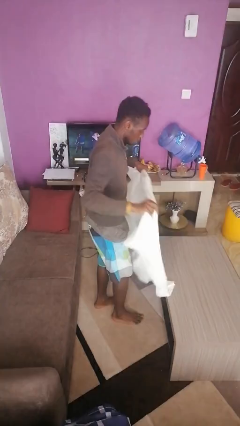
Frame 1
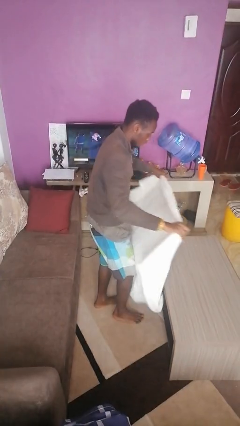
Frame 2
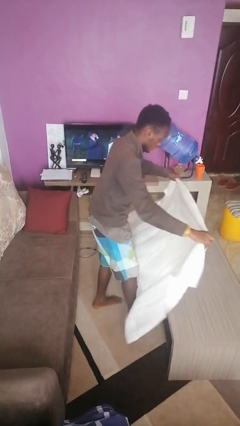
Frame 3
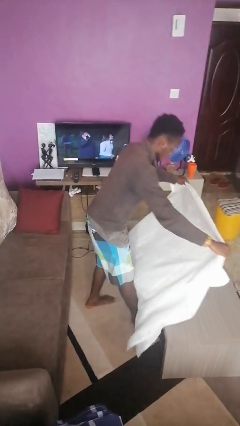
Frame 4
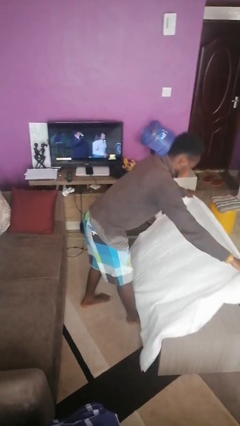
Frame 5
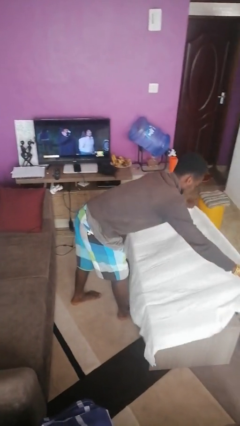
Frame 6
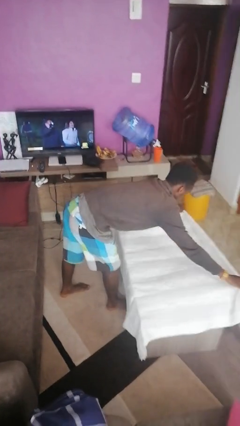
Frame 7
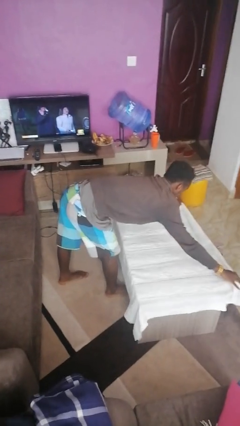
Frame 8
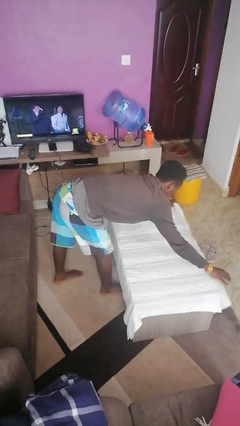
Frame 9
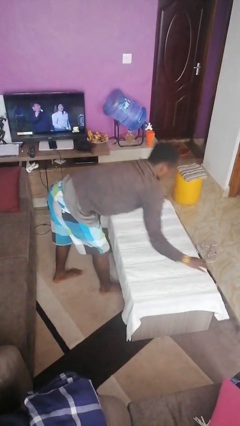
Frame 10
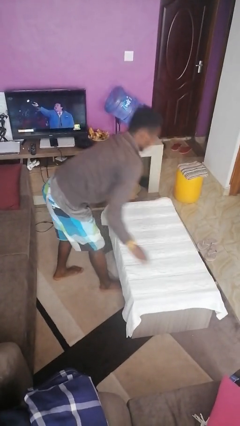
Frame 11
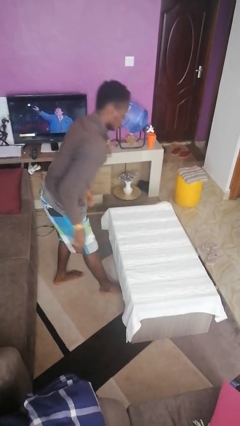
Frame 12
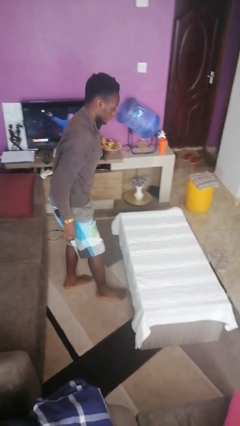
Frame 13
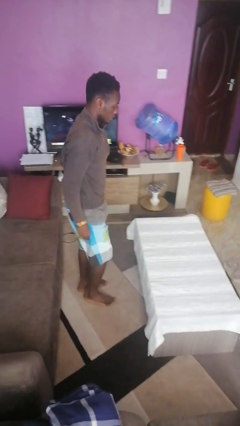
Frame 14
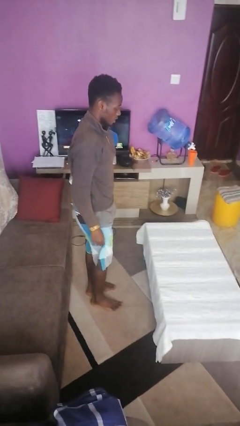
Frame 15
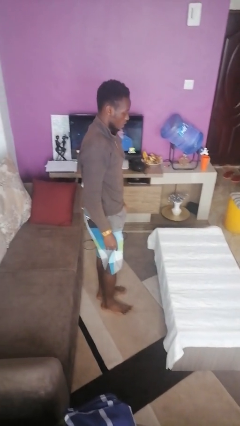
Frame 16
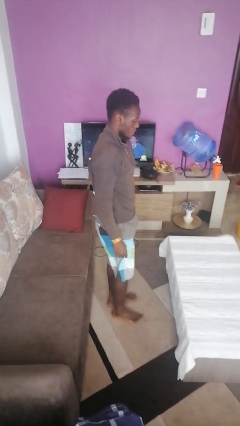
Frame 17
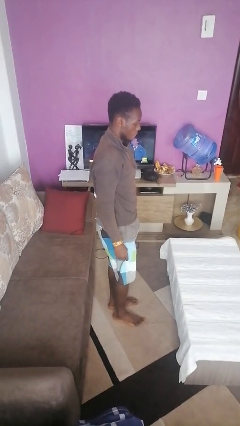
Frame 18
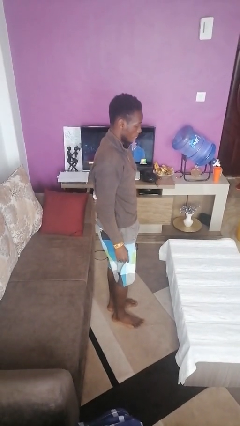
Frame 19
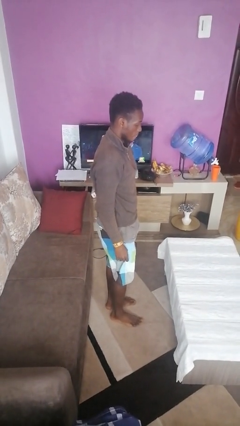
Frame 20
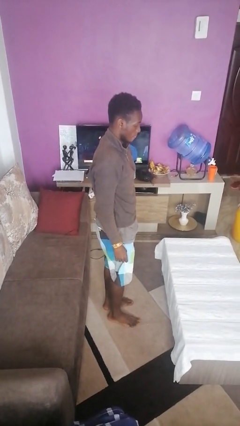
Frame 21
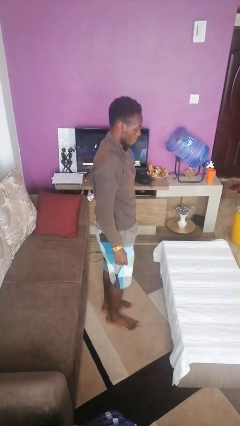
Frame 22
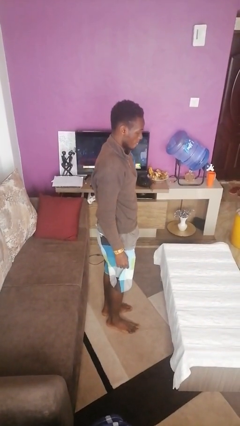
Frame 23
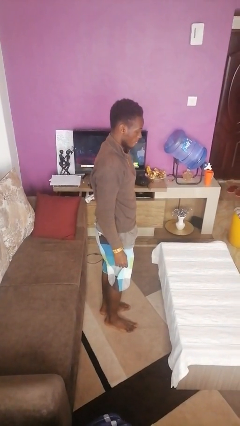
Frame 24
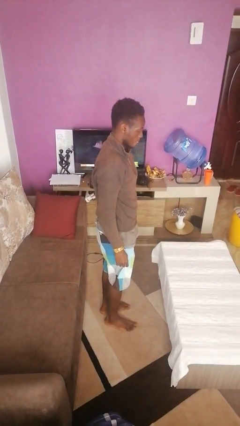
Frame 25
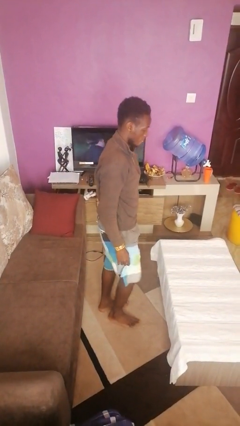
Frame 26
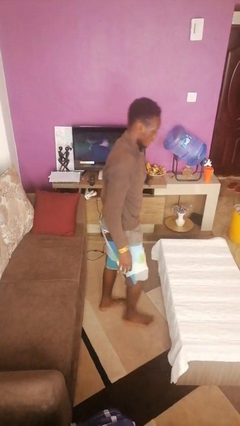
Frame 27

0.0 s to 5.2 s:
person spreads tablecloth

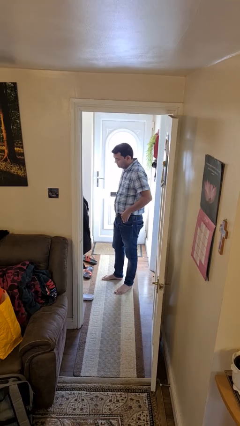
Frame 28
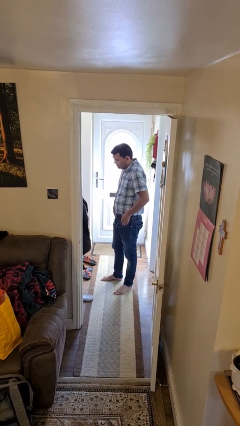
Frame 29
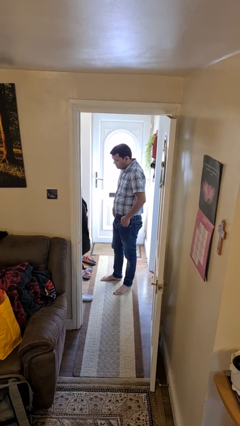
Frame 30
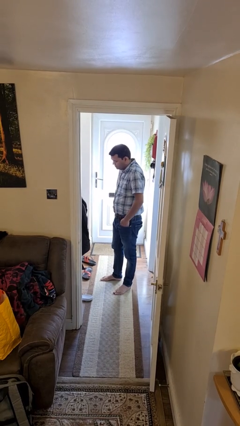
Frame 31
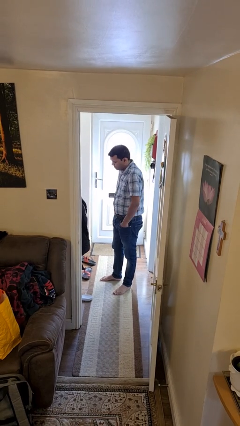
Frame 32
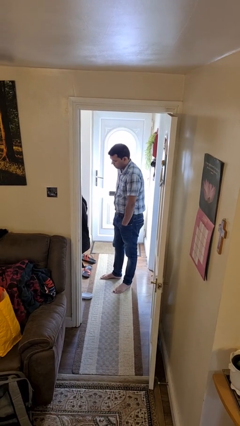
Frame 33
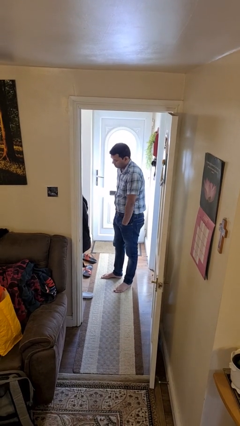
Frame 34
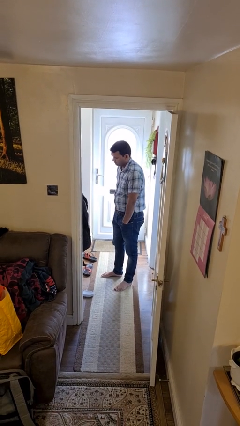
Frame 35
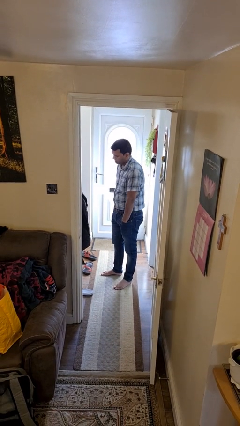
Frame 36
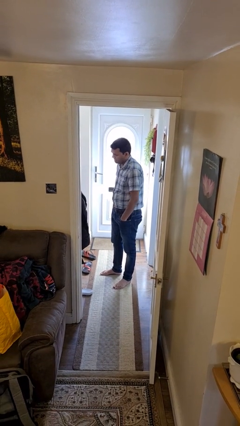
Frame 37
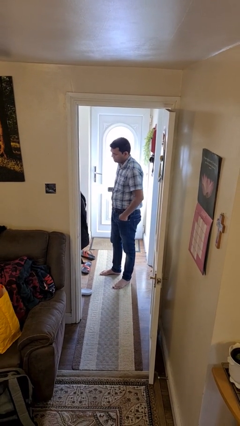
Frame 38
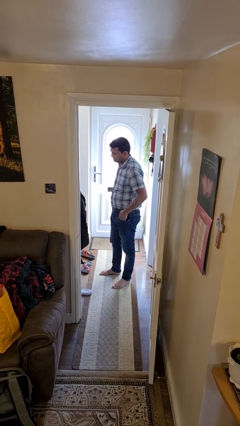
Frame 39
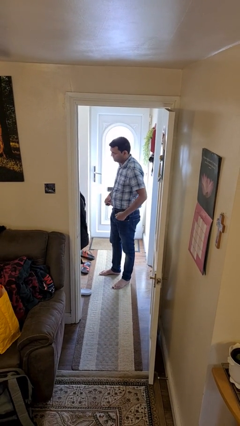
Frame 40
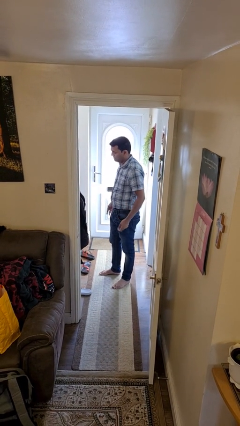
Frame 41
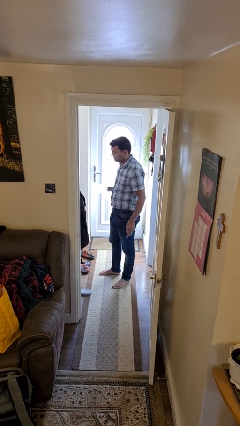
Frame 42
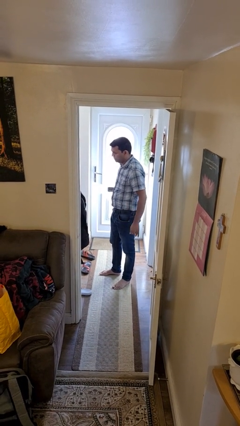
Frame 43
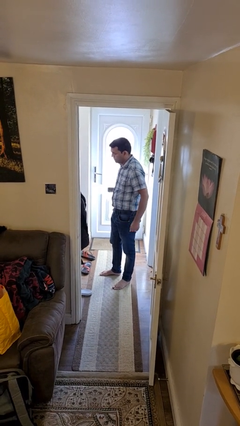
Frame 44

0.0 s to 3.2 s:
person puts hands in back pockets

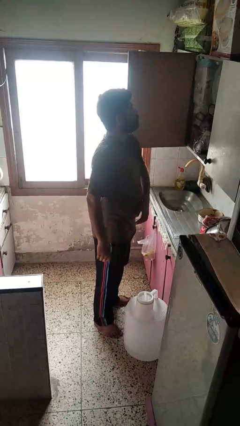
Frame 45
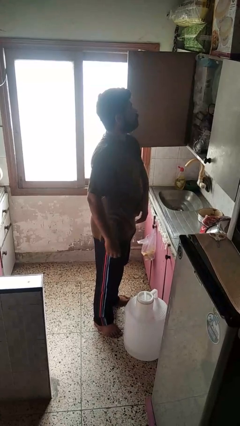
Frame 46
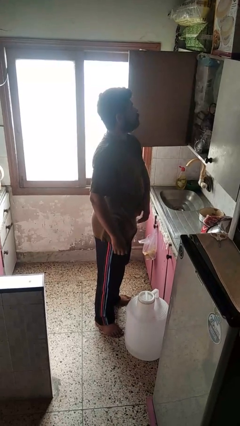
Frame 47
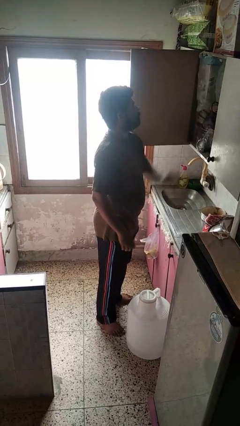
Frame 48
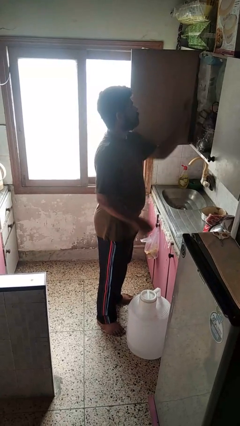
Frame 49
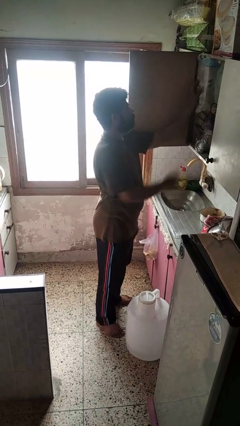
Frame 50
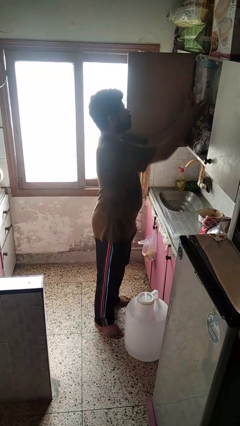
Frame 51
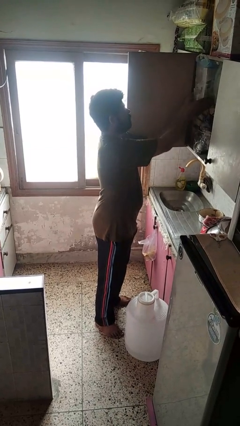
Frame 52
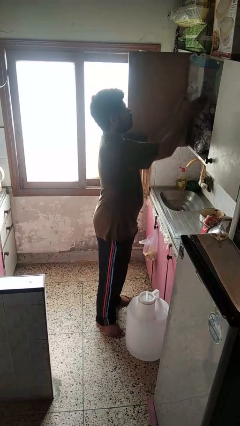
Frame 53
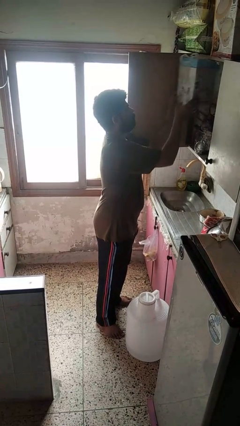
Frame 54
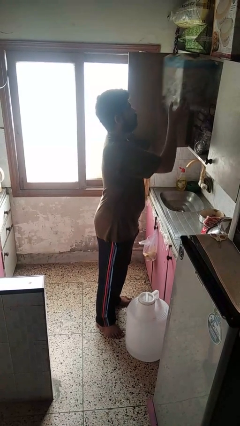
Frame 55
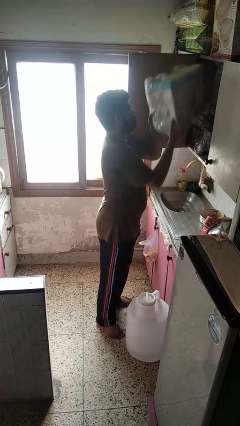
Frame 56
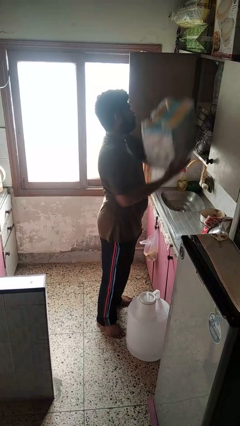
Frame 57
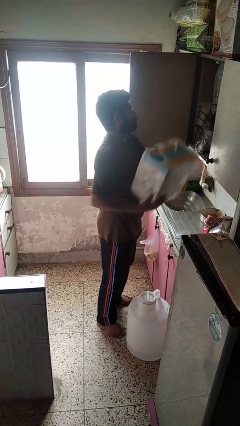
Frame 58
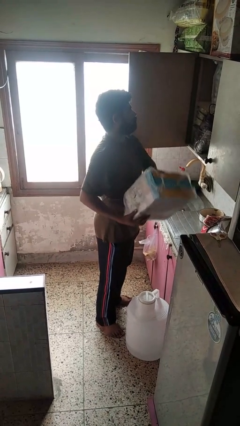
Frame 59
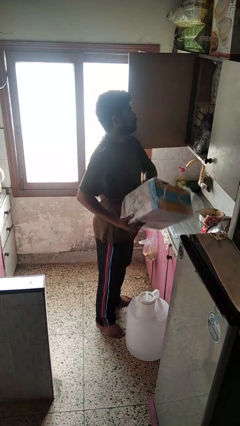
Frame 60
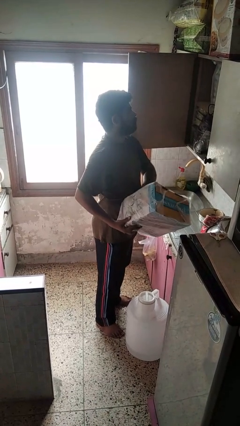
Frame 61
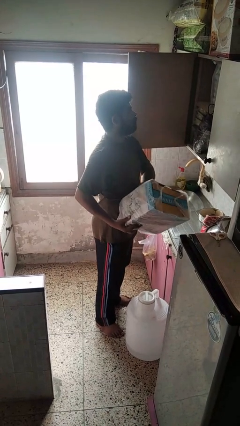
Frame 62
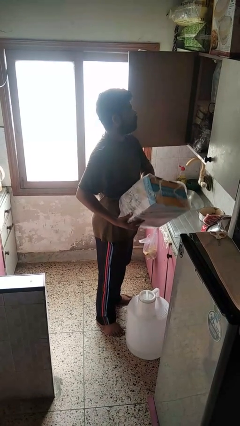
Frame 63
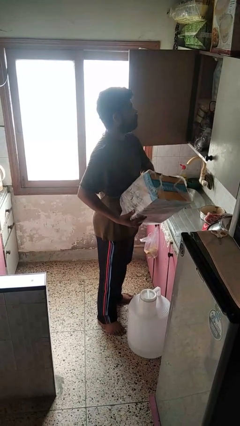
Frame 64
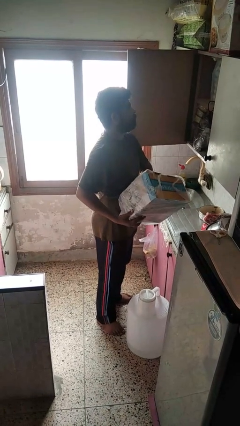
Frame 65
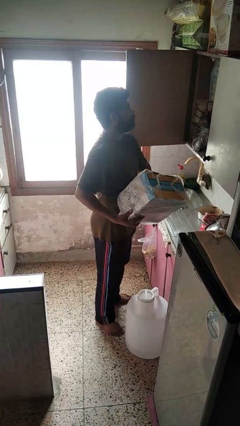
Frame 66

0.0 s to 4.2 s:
person picks up object from cabinet

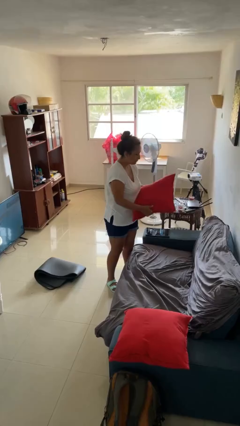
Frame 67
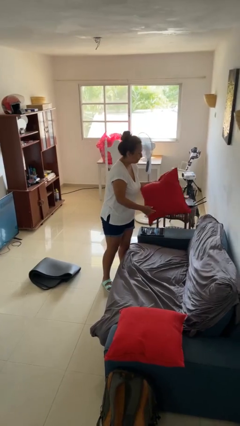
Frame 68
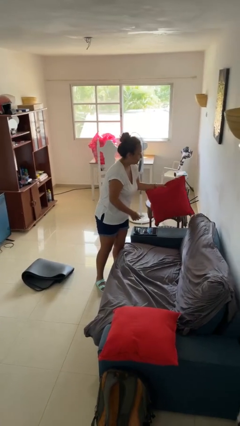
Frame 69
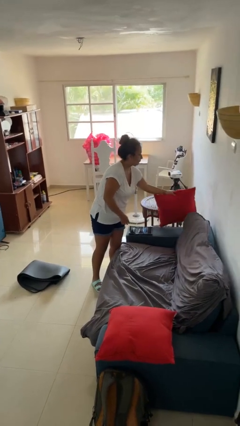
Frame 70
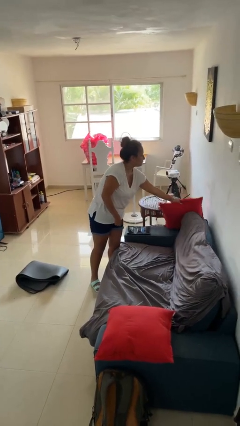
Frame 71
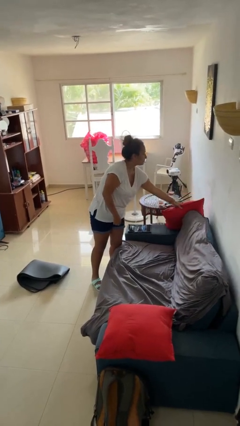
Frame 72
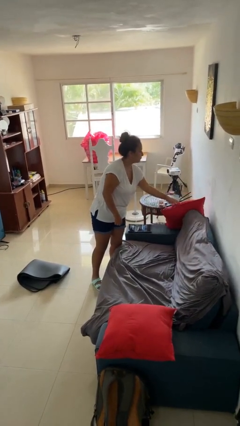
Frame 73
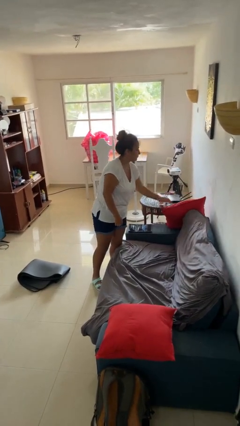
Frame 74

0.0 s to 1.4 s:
person puts down object on couch

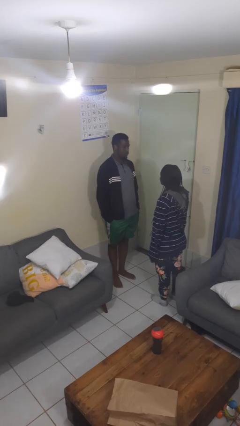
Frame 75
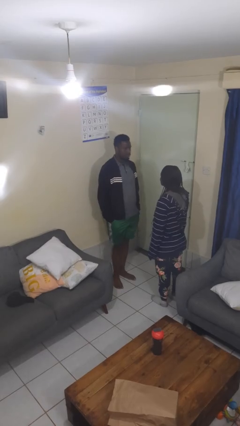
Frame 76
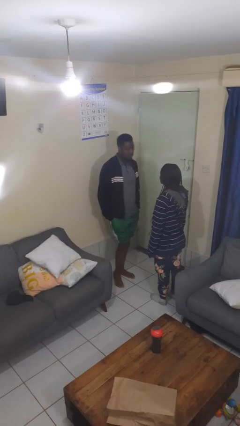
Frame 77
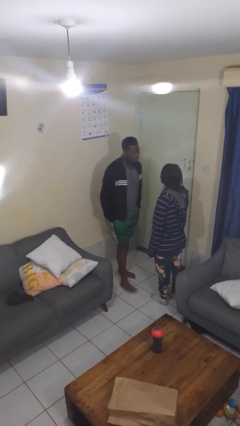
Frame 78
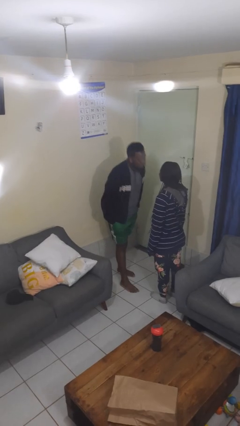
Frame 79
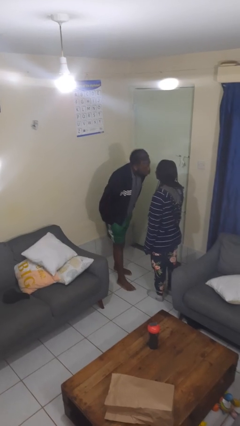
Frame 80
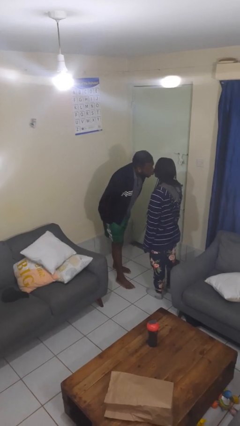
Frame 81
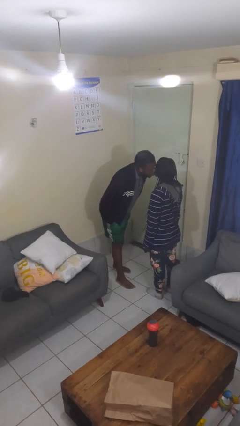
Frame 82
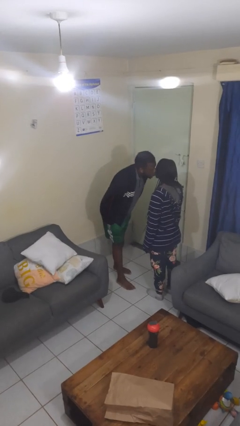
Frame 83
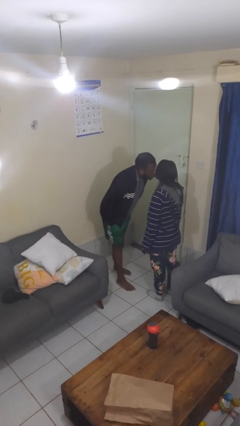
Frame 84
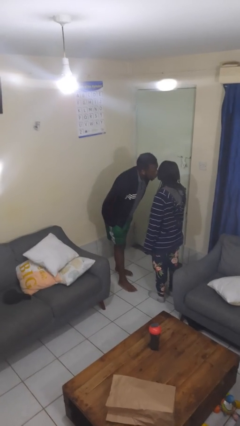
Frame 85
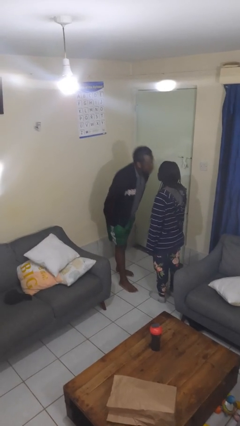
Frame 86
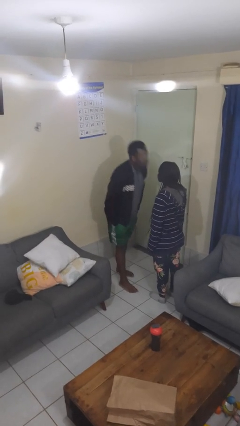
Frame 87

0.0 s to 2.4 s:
person kisses cheek of person

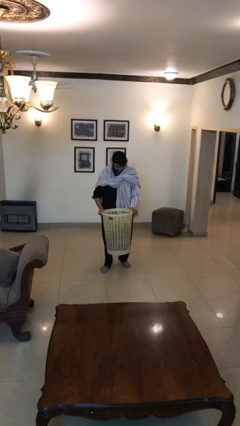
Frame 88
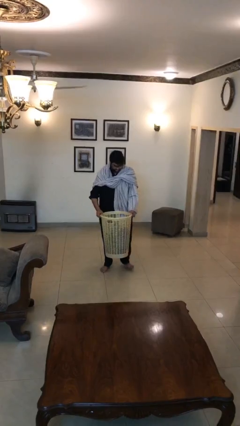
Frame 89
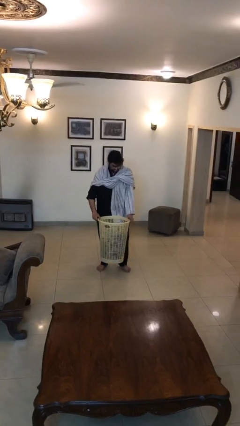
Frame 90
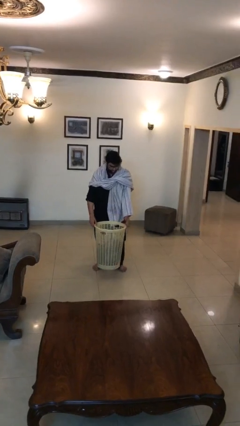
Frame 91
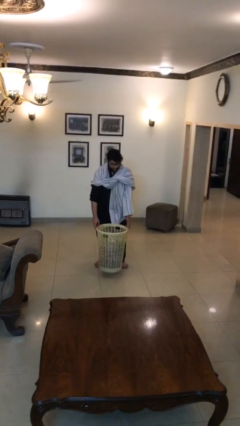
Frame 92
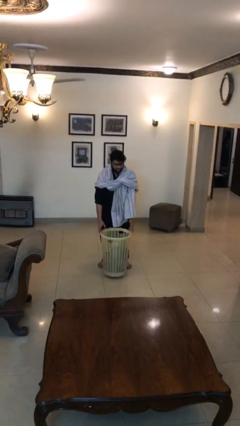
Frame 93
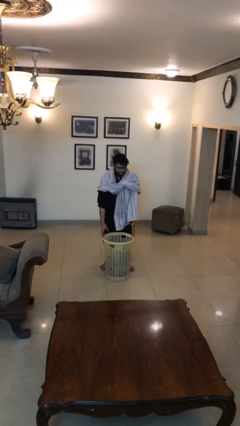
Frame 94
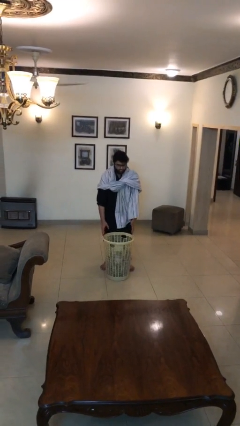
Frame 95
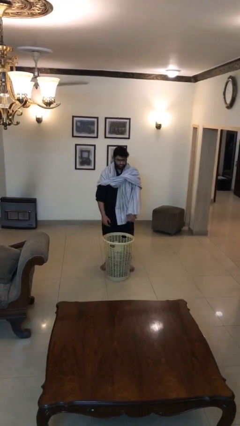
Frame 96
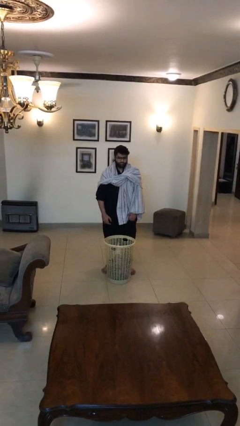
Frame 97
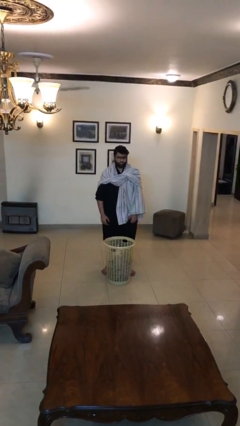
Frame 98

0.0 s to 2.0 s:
person puts down object on floor
